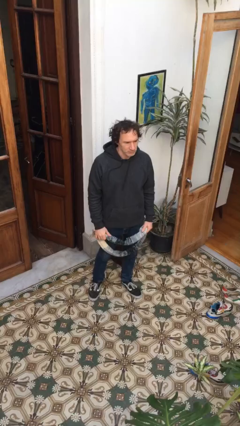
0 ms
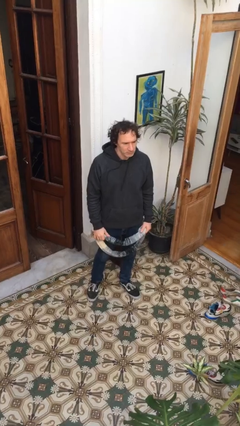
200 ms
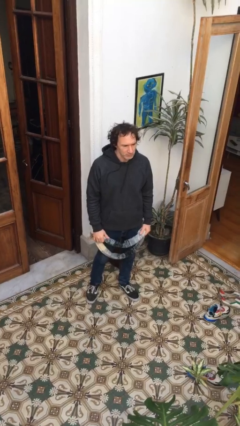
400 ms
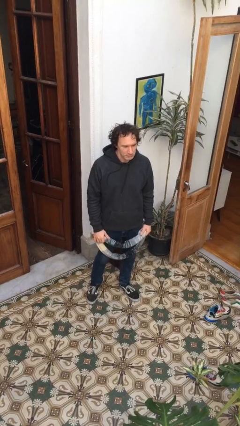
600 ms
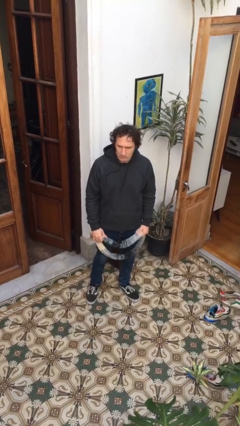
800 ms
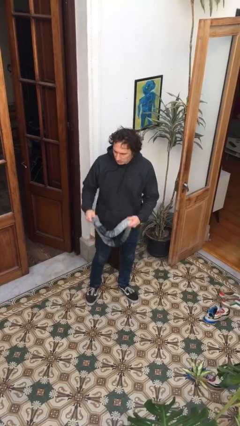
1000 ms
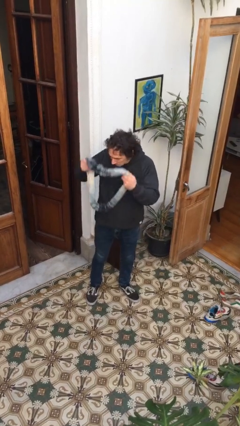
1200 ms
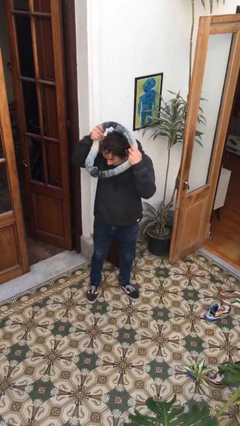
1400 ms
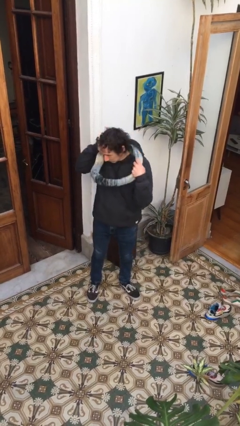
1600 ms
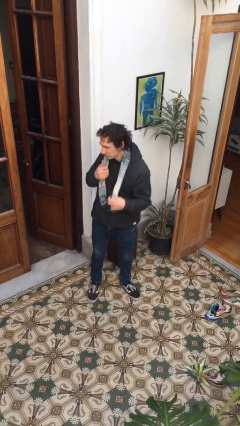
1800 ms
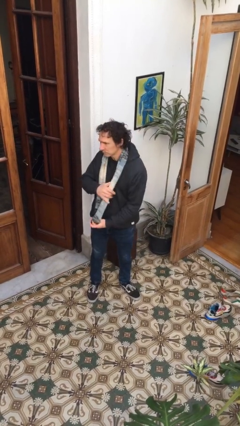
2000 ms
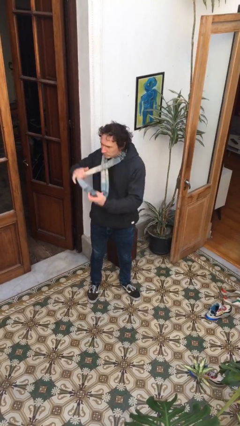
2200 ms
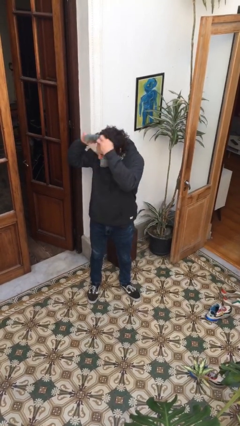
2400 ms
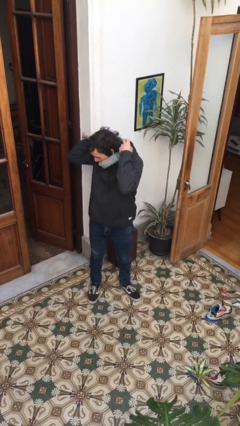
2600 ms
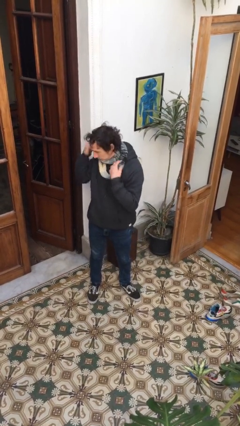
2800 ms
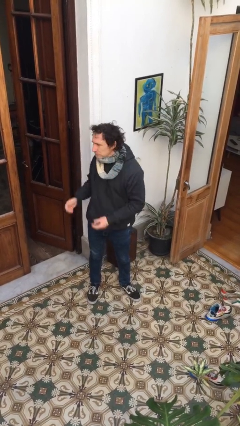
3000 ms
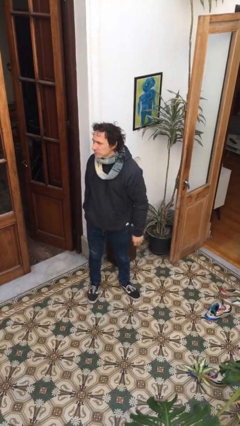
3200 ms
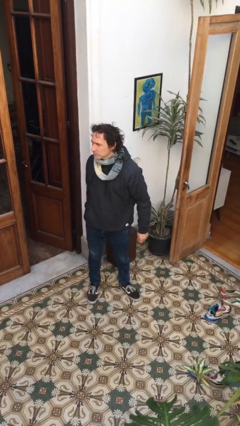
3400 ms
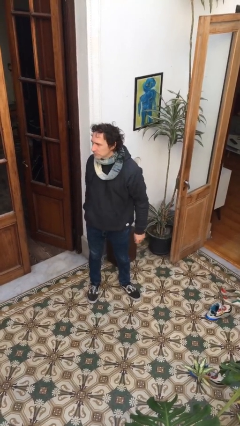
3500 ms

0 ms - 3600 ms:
person puts on scarf

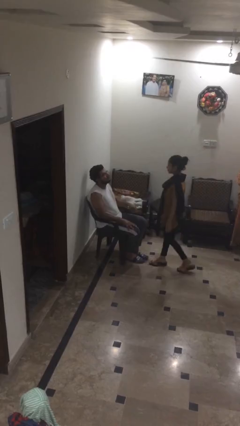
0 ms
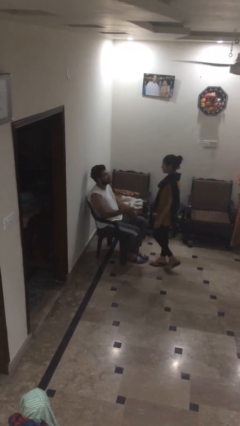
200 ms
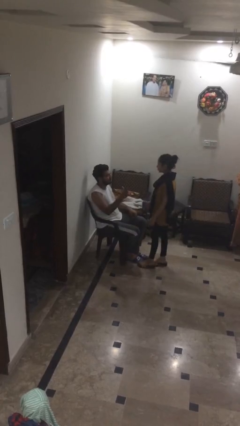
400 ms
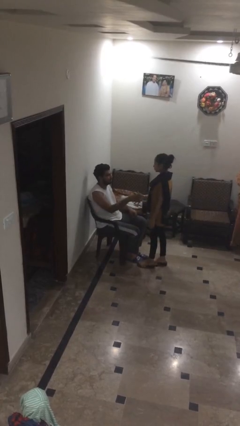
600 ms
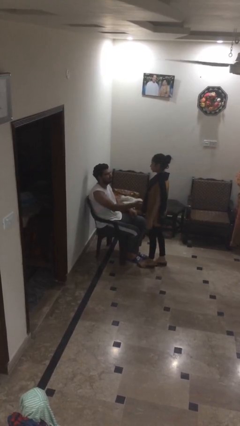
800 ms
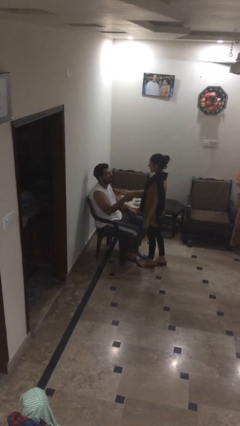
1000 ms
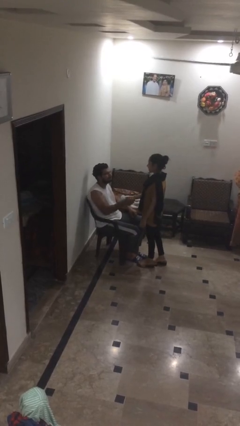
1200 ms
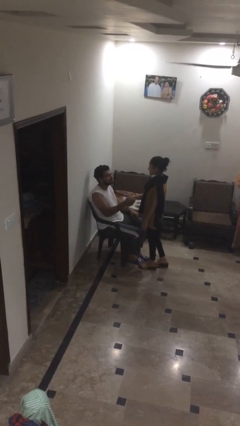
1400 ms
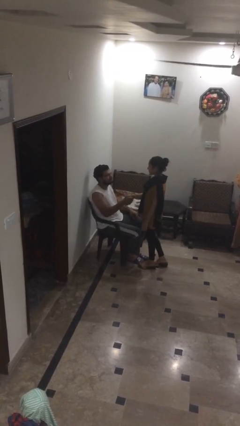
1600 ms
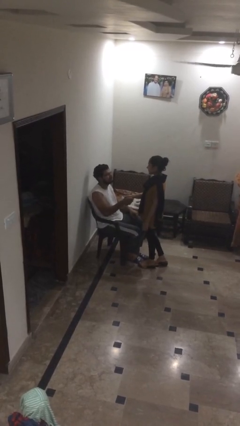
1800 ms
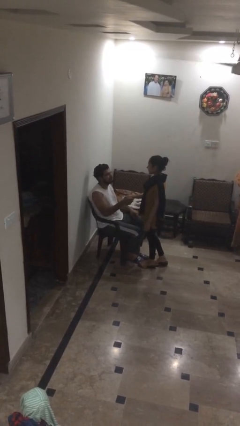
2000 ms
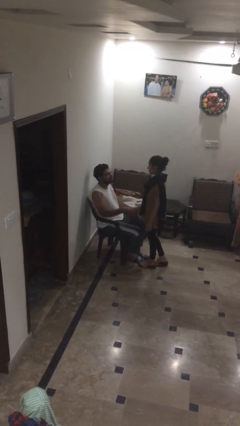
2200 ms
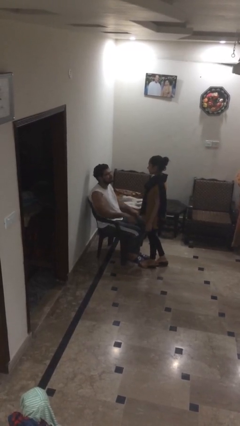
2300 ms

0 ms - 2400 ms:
person shakes hand

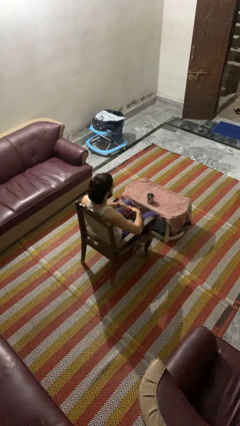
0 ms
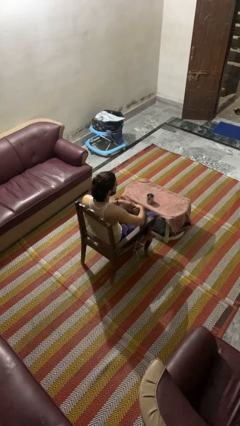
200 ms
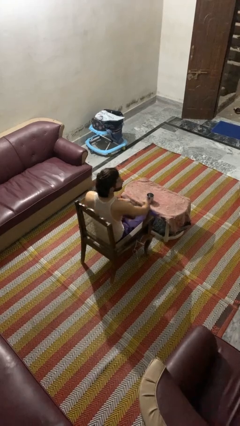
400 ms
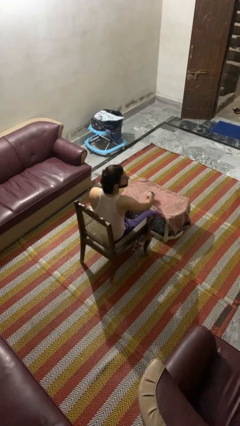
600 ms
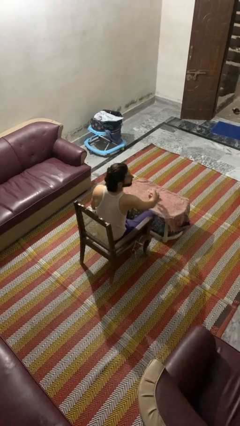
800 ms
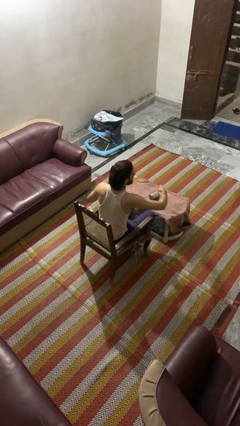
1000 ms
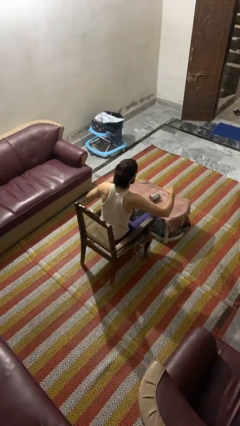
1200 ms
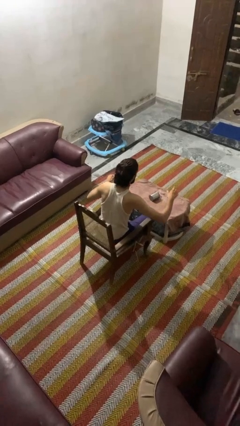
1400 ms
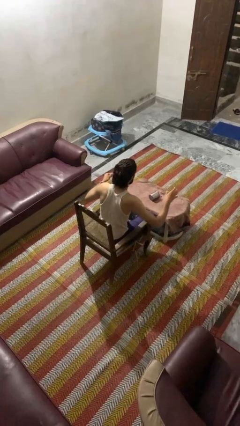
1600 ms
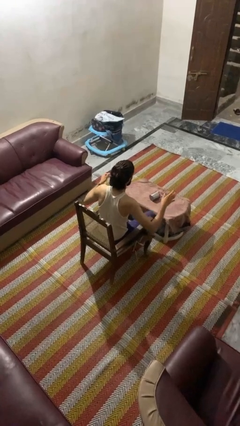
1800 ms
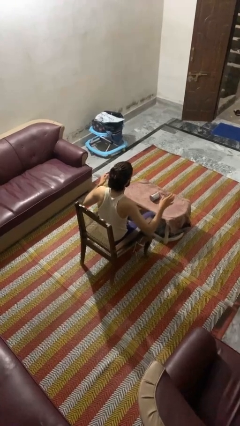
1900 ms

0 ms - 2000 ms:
person spills on table

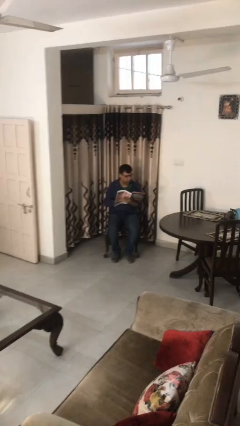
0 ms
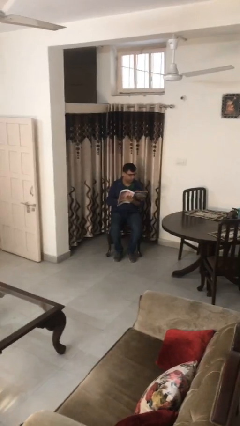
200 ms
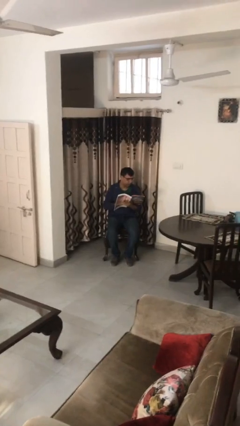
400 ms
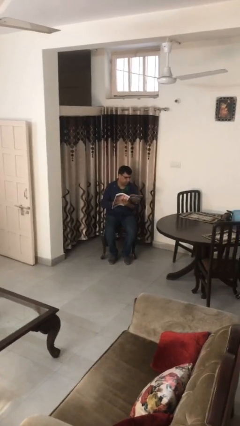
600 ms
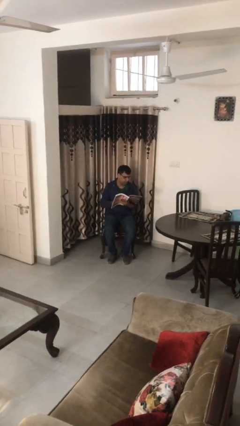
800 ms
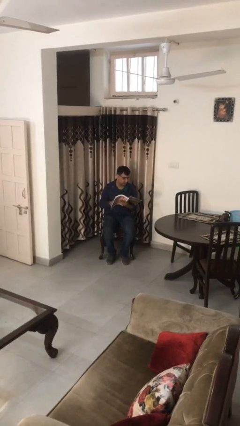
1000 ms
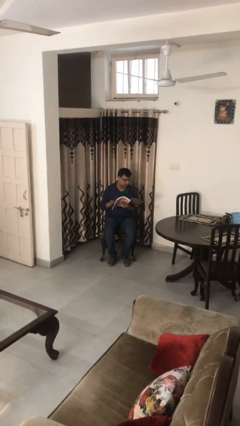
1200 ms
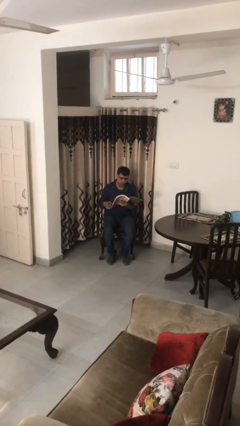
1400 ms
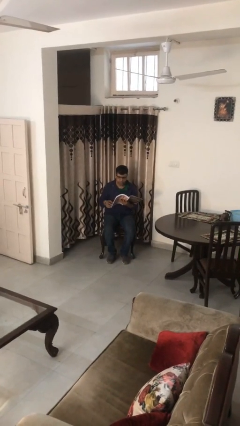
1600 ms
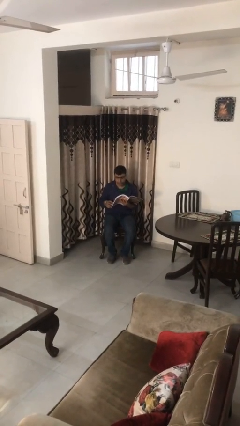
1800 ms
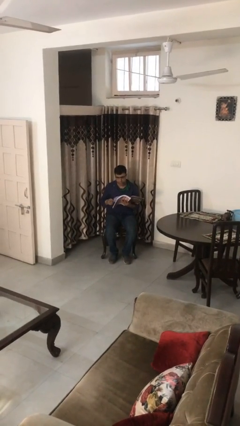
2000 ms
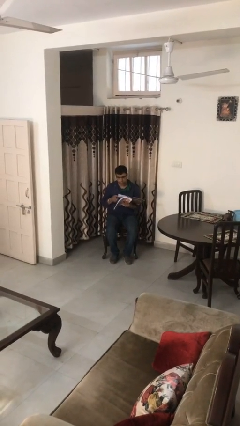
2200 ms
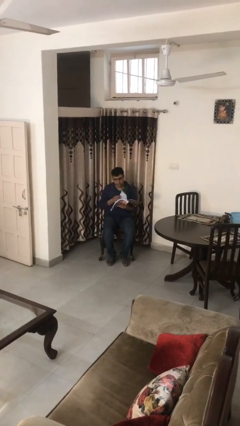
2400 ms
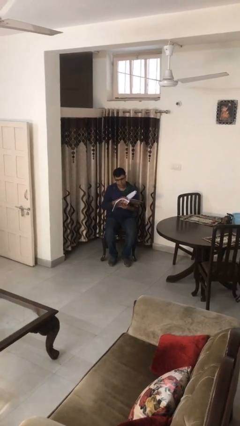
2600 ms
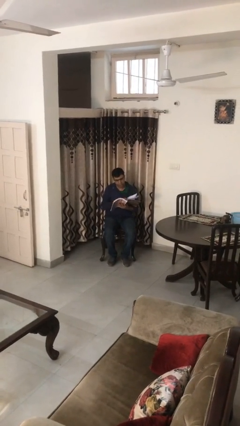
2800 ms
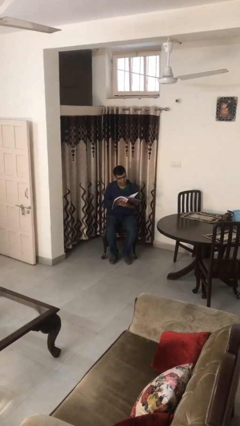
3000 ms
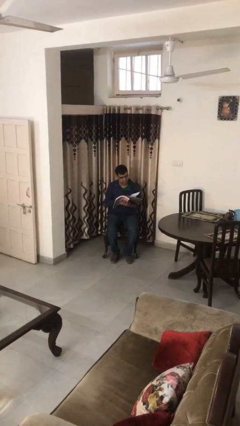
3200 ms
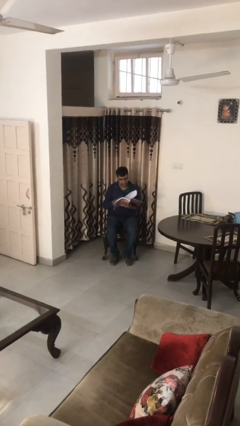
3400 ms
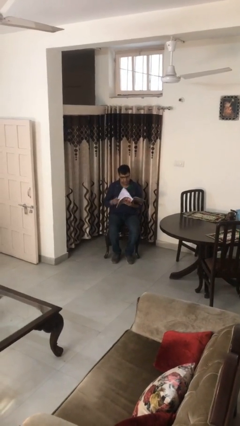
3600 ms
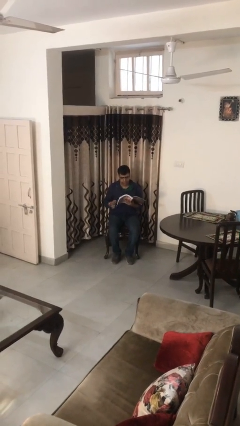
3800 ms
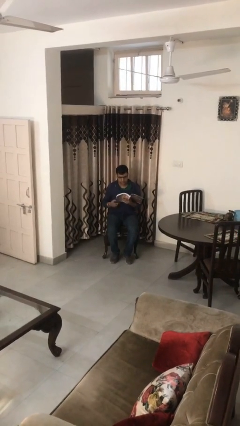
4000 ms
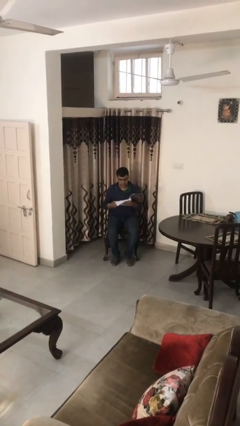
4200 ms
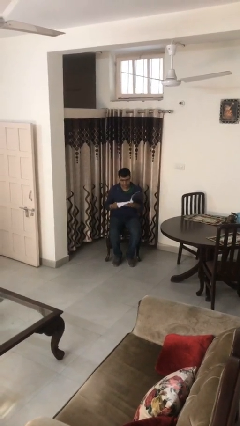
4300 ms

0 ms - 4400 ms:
person reads document

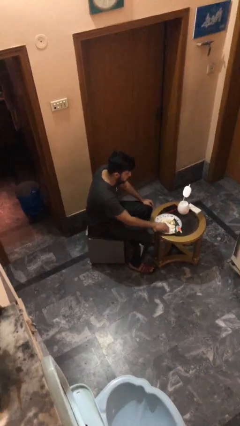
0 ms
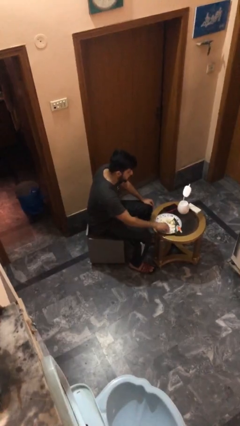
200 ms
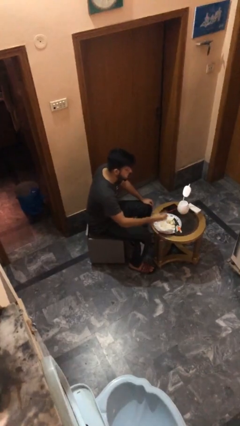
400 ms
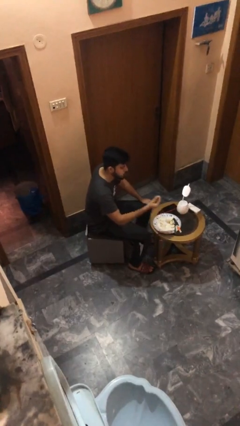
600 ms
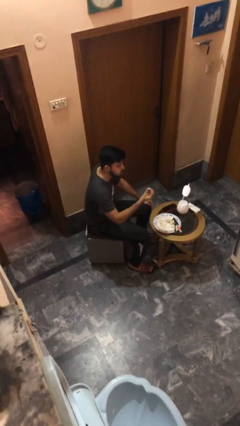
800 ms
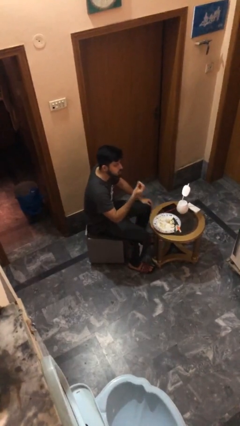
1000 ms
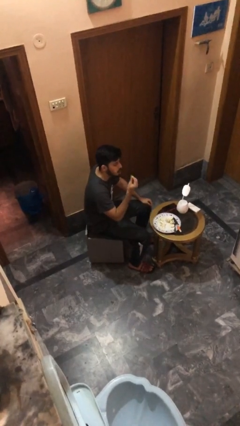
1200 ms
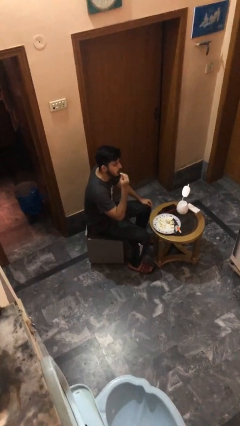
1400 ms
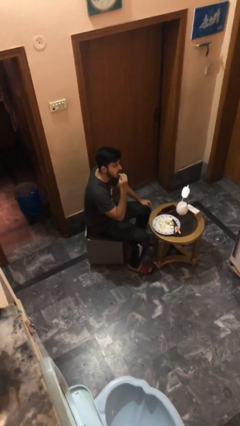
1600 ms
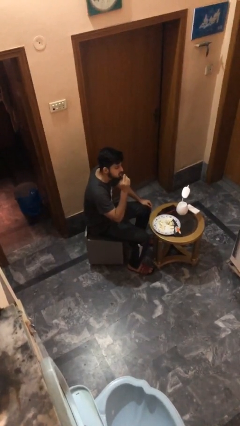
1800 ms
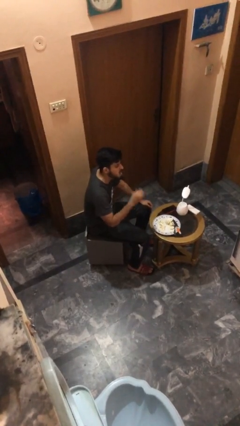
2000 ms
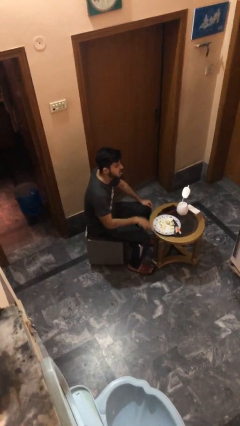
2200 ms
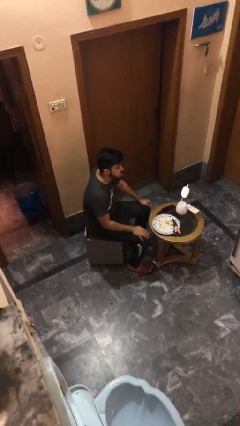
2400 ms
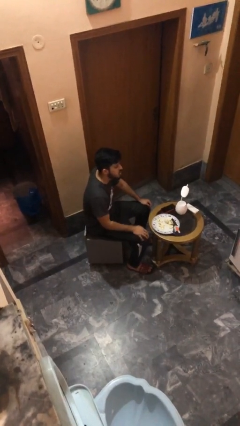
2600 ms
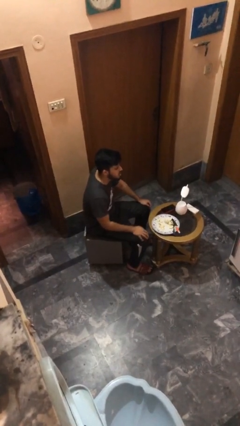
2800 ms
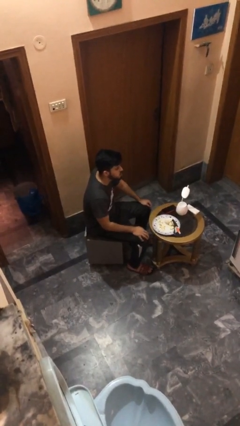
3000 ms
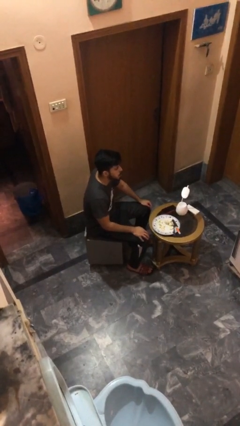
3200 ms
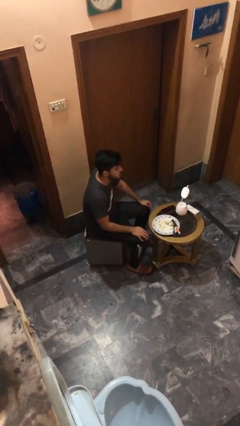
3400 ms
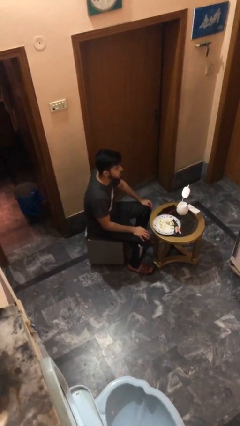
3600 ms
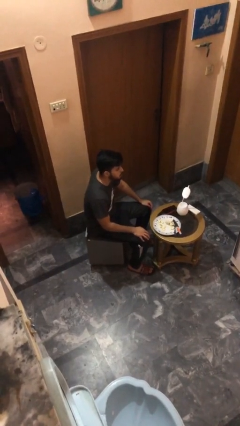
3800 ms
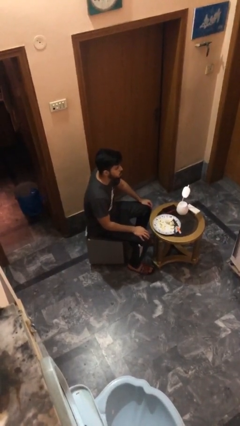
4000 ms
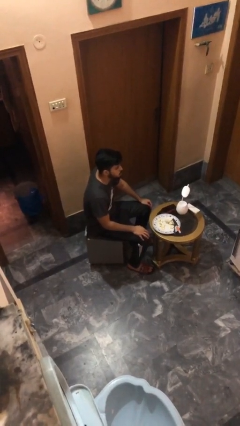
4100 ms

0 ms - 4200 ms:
person eats with hands

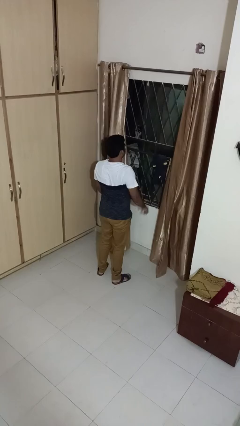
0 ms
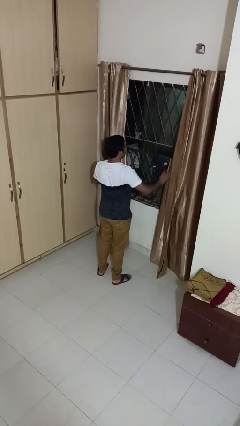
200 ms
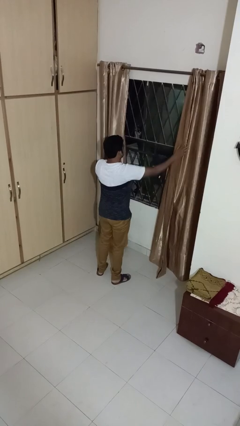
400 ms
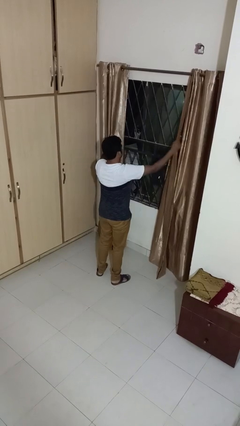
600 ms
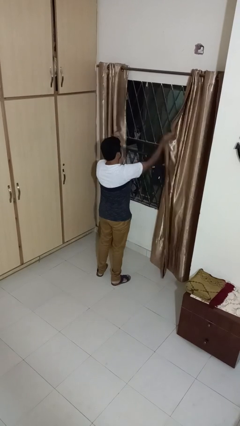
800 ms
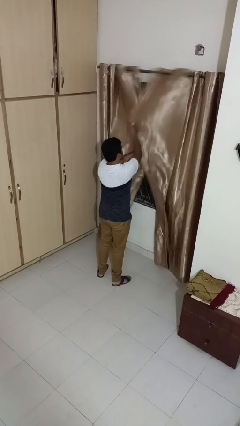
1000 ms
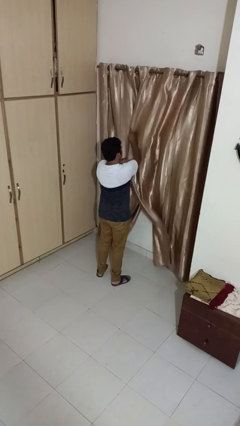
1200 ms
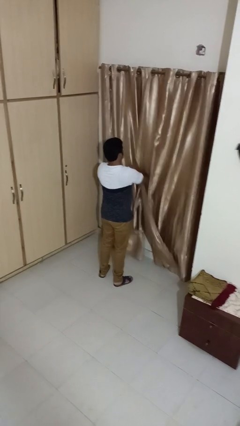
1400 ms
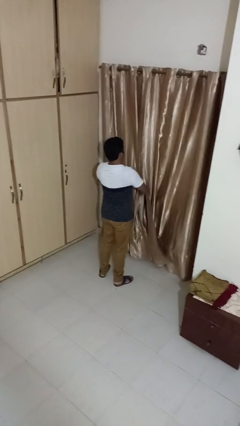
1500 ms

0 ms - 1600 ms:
person closes curtains
